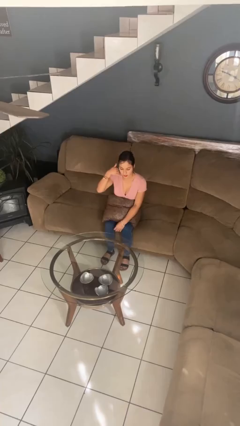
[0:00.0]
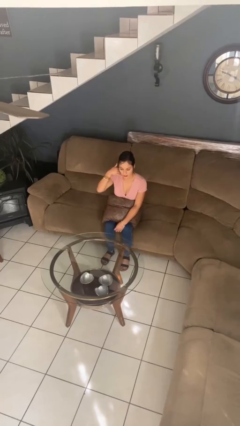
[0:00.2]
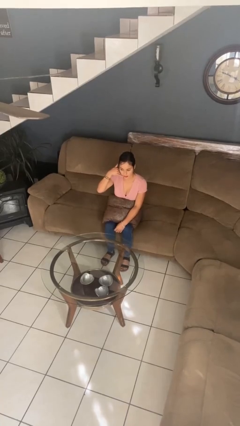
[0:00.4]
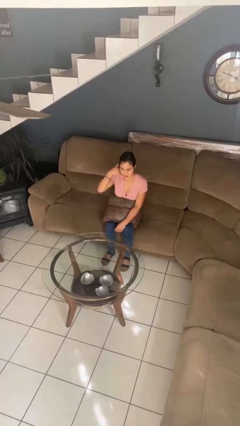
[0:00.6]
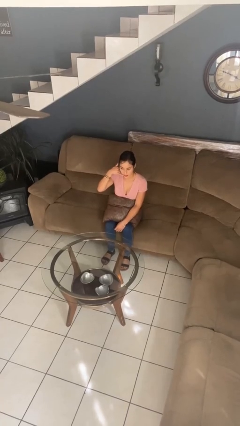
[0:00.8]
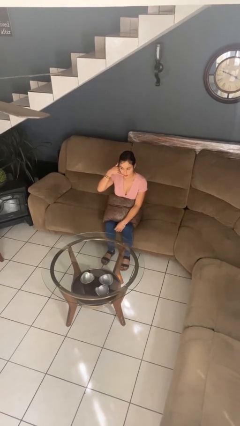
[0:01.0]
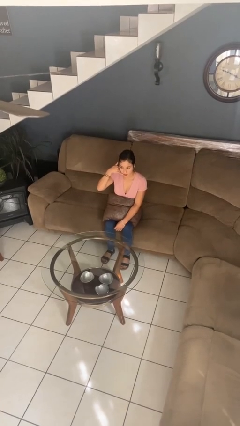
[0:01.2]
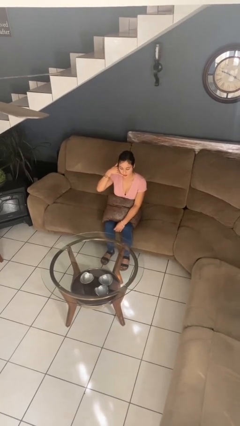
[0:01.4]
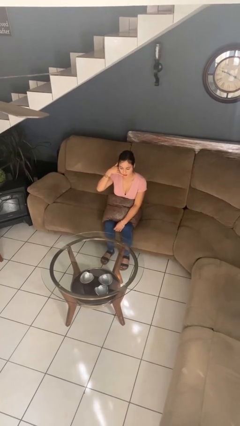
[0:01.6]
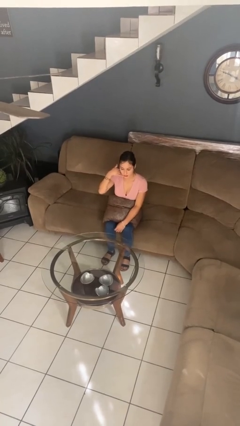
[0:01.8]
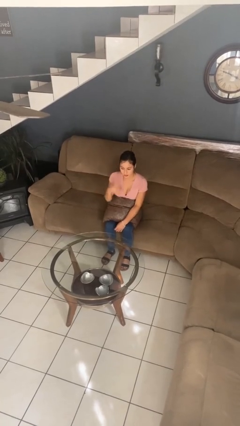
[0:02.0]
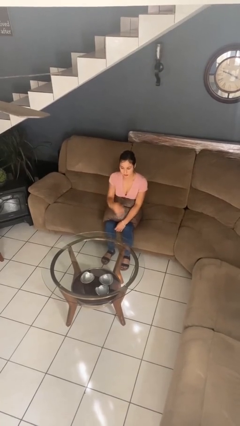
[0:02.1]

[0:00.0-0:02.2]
person gestures call me

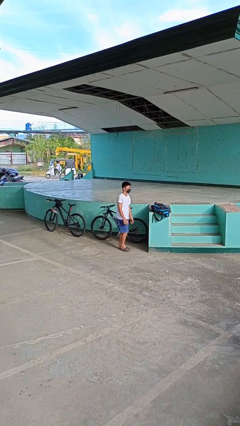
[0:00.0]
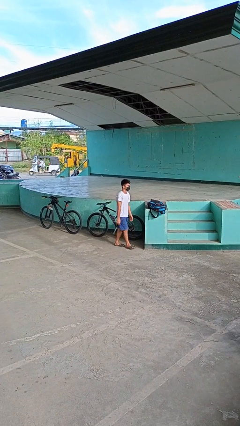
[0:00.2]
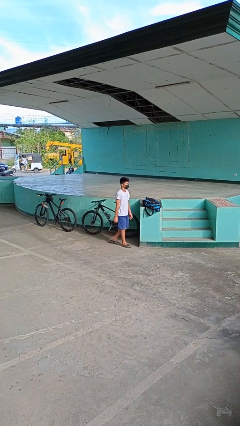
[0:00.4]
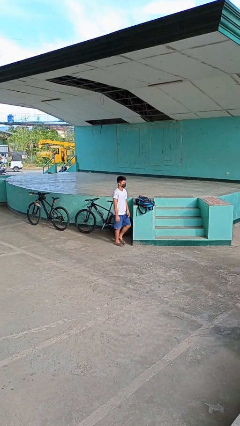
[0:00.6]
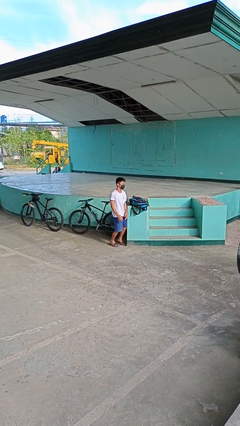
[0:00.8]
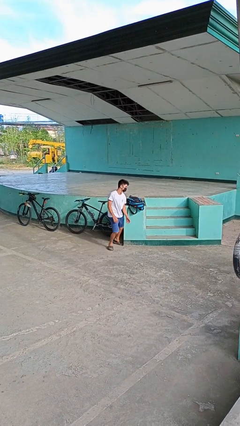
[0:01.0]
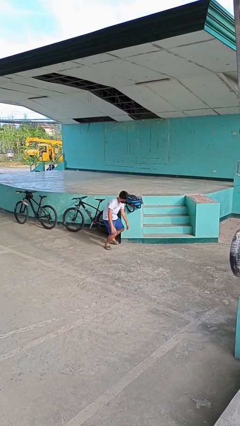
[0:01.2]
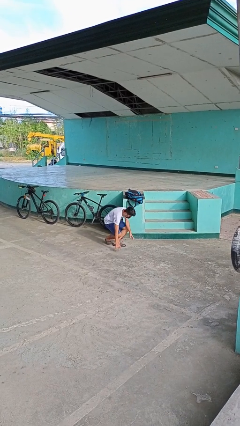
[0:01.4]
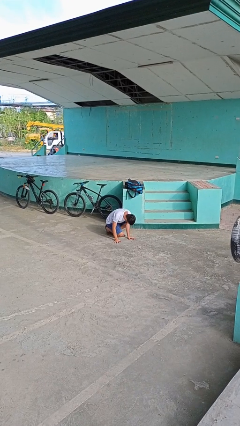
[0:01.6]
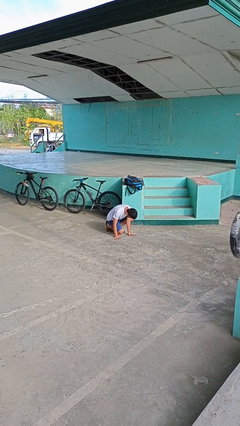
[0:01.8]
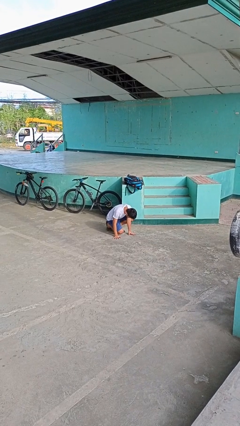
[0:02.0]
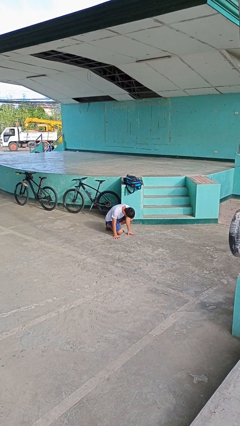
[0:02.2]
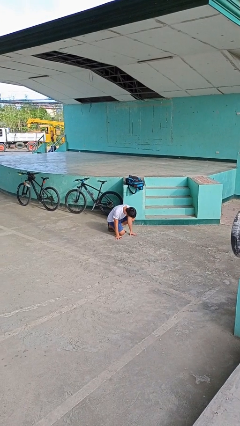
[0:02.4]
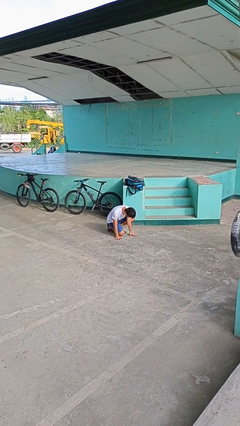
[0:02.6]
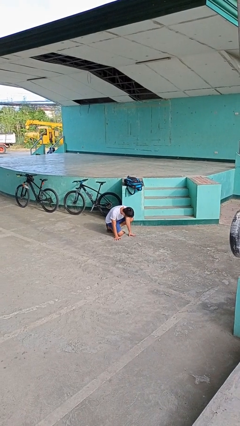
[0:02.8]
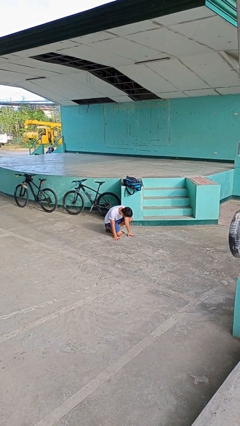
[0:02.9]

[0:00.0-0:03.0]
person trips on object on floor

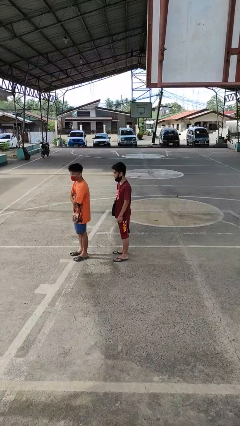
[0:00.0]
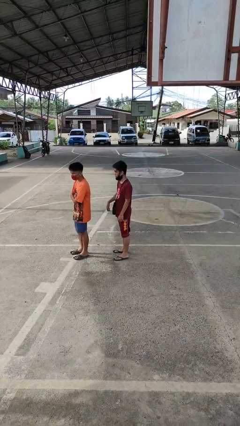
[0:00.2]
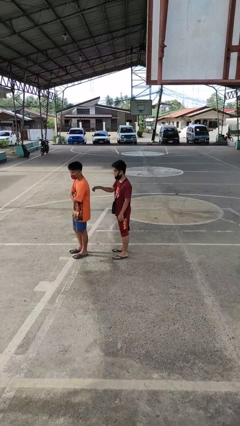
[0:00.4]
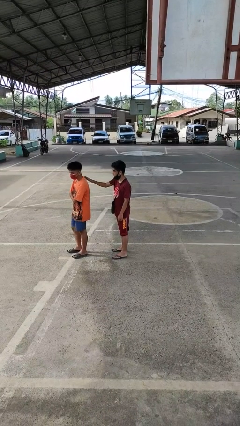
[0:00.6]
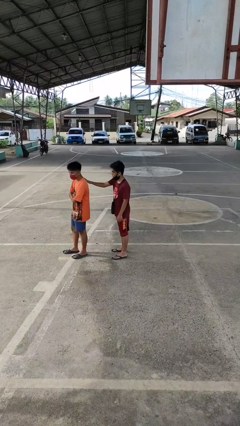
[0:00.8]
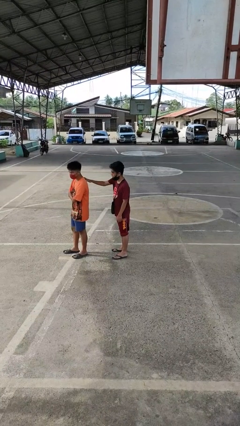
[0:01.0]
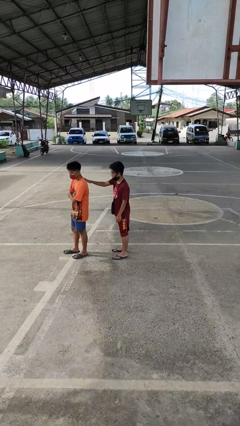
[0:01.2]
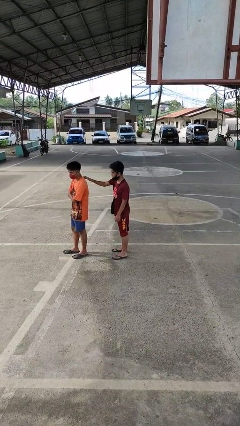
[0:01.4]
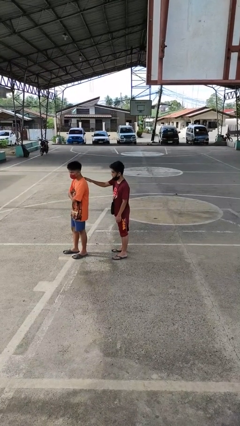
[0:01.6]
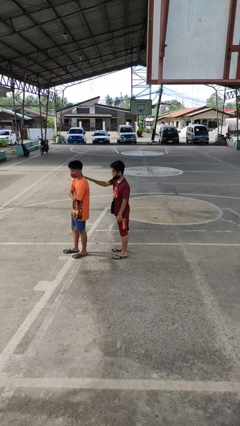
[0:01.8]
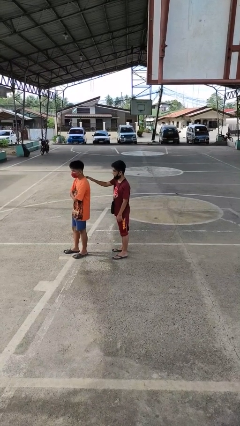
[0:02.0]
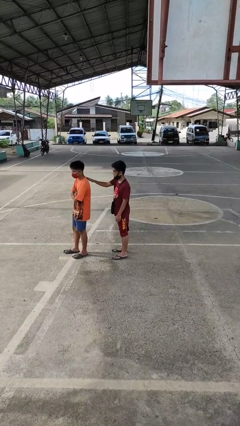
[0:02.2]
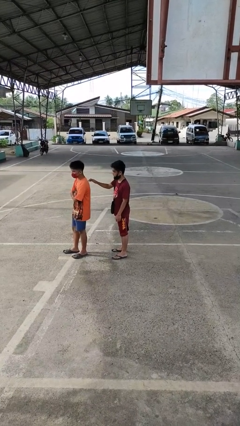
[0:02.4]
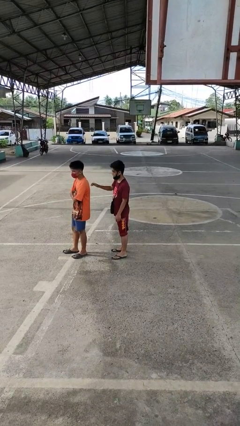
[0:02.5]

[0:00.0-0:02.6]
person touches back of person

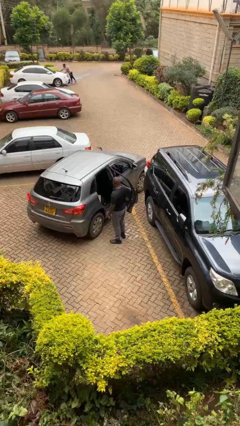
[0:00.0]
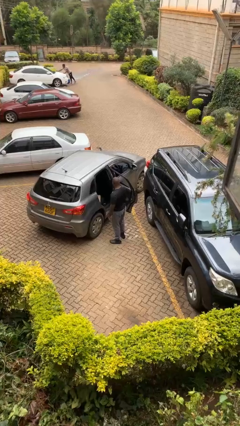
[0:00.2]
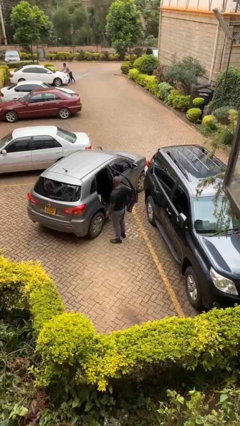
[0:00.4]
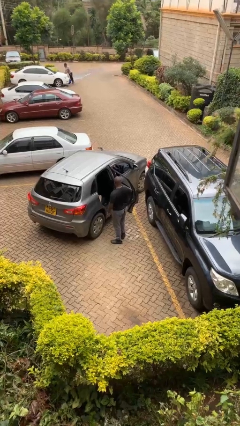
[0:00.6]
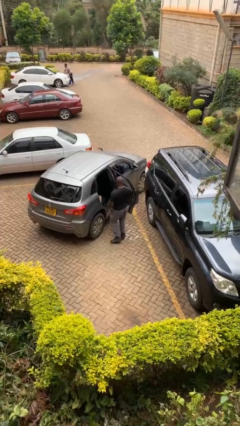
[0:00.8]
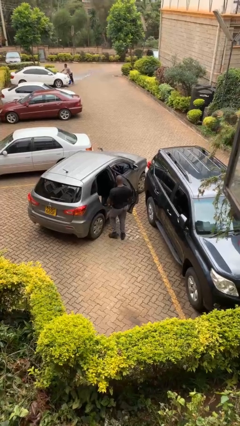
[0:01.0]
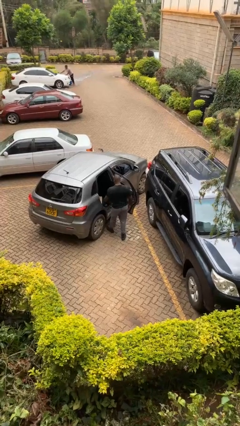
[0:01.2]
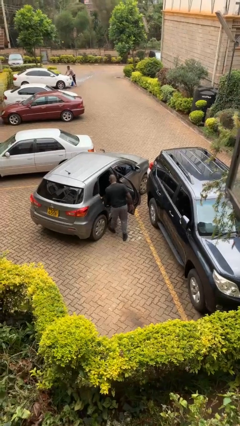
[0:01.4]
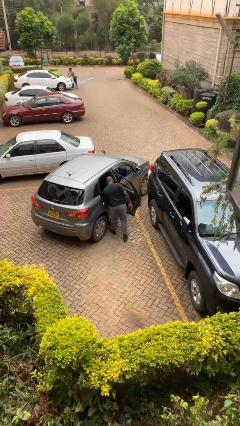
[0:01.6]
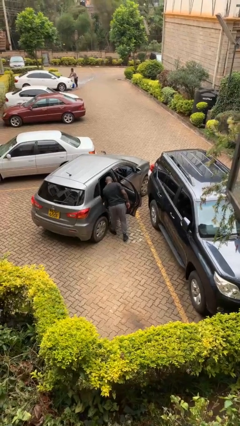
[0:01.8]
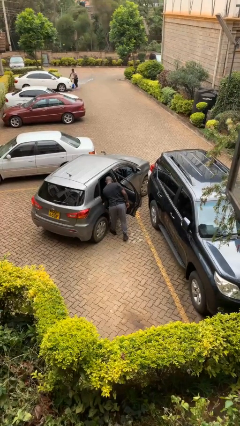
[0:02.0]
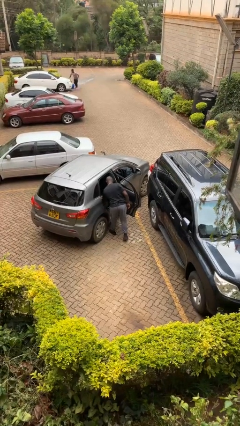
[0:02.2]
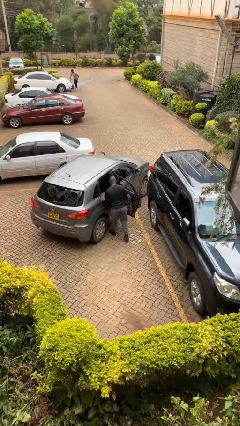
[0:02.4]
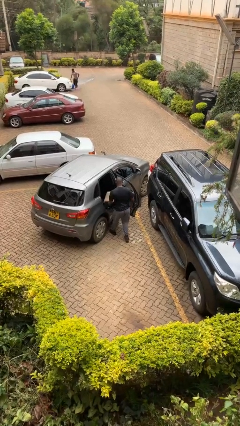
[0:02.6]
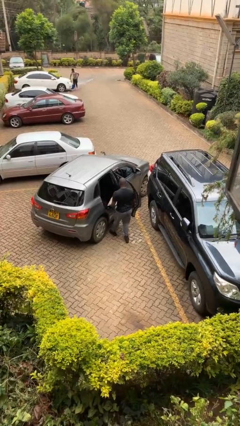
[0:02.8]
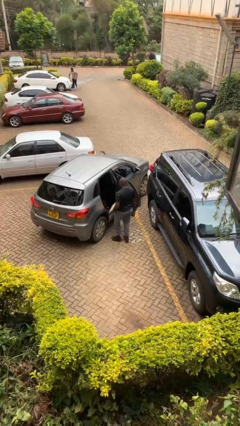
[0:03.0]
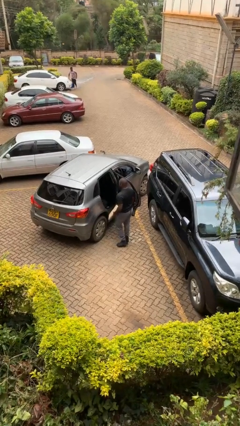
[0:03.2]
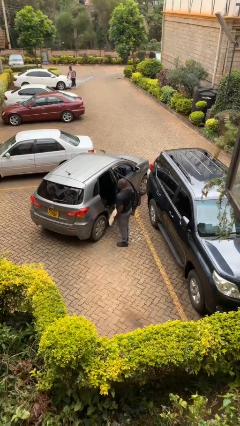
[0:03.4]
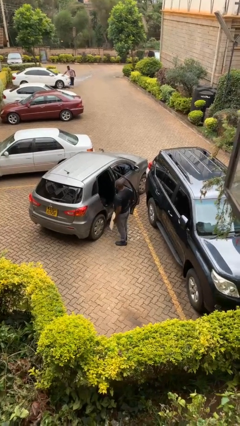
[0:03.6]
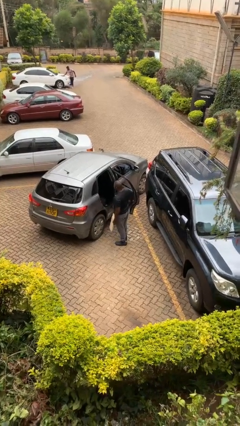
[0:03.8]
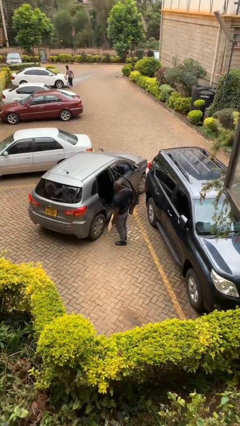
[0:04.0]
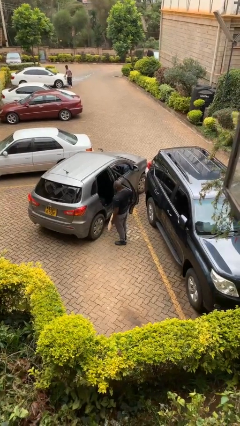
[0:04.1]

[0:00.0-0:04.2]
person unloads car

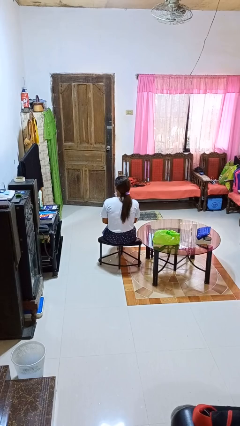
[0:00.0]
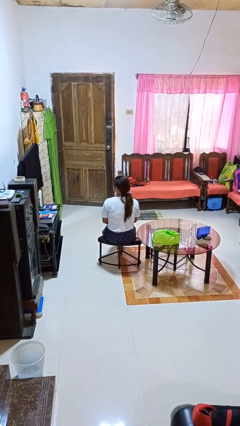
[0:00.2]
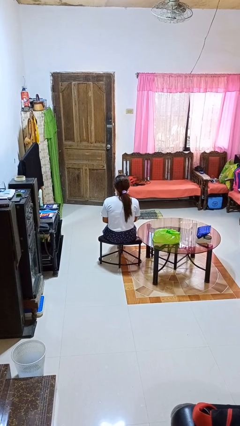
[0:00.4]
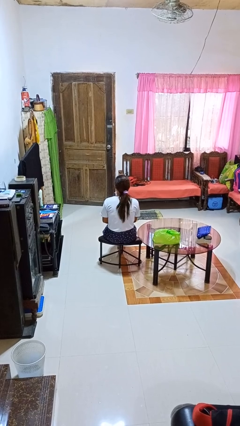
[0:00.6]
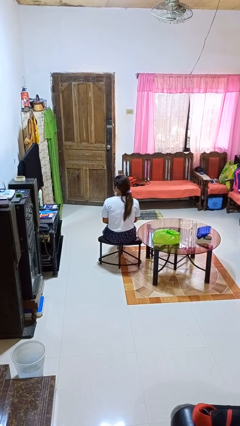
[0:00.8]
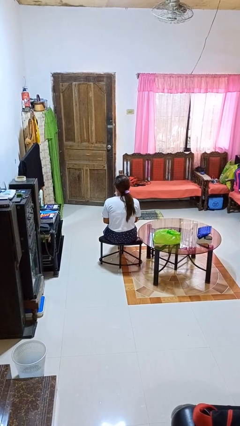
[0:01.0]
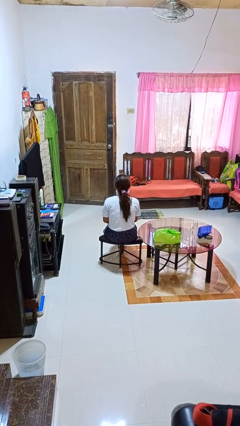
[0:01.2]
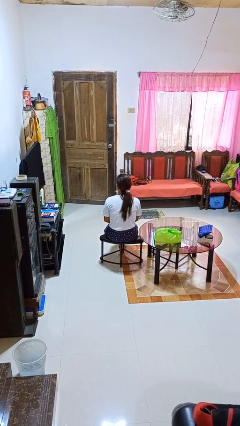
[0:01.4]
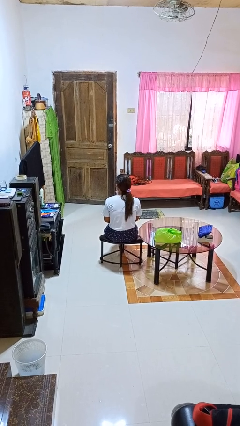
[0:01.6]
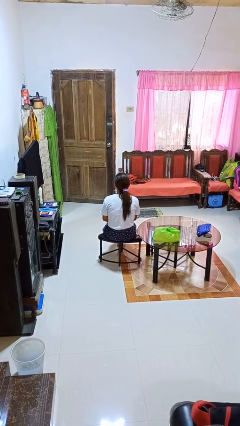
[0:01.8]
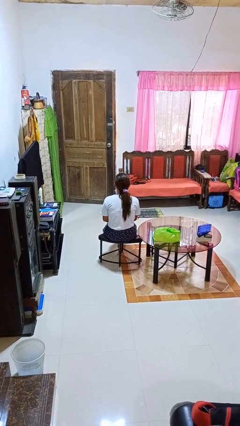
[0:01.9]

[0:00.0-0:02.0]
person shakes head

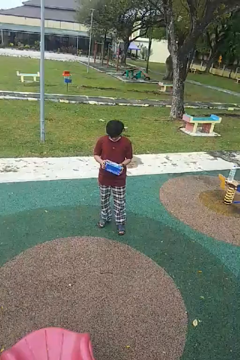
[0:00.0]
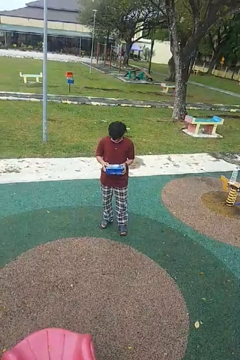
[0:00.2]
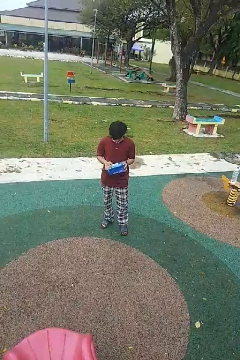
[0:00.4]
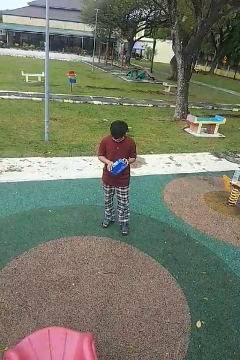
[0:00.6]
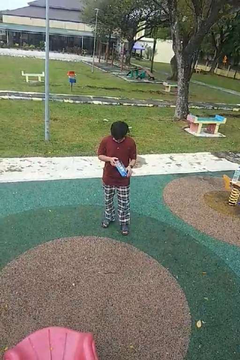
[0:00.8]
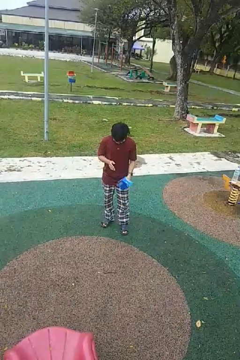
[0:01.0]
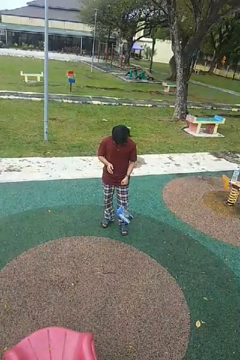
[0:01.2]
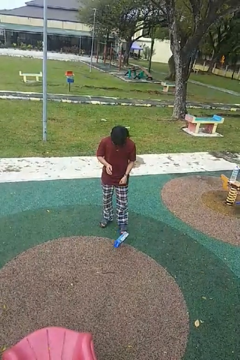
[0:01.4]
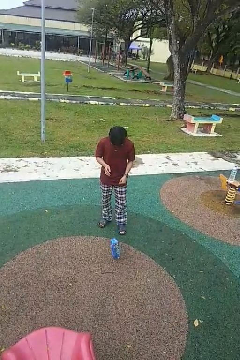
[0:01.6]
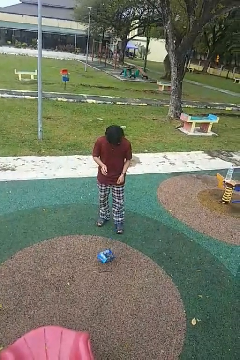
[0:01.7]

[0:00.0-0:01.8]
person drops object

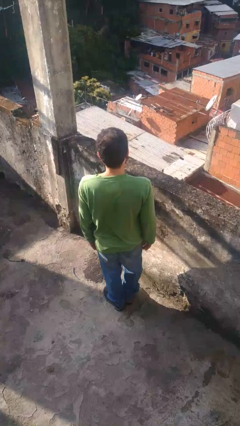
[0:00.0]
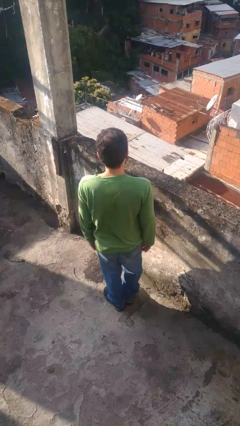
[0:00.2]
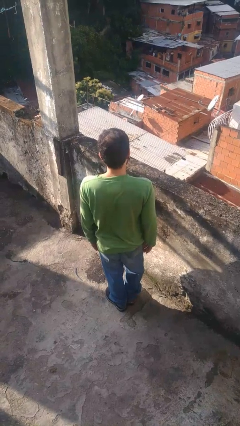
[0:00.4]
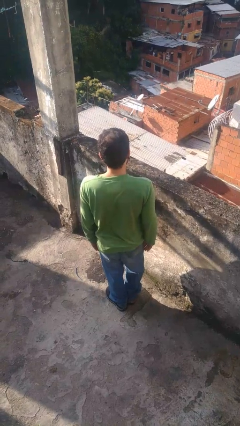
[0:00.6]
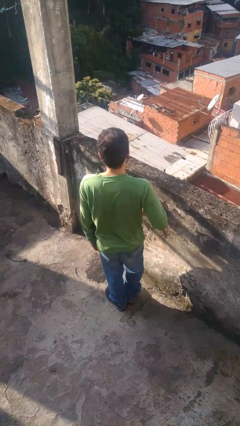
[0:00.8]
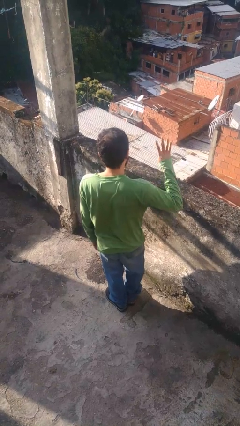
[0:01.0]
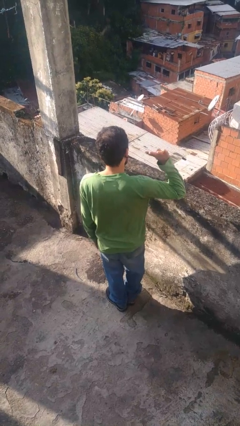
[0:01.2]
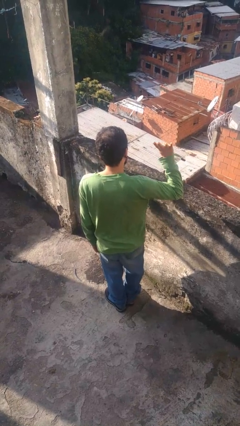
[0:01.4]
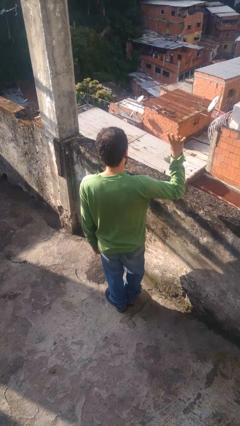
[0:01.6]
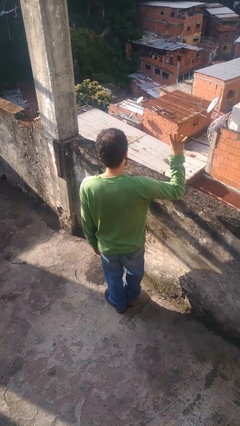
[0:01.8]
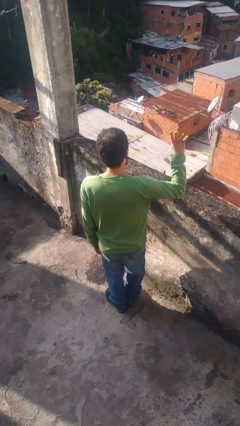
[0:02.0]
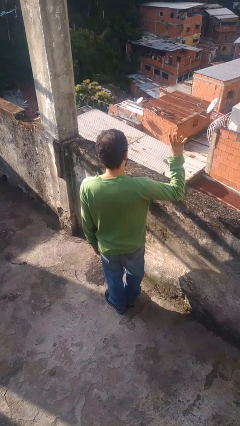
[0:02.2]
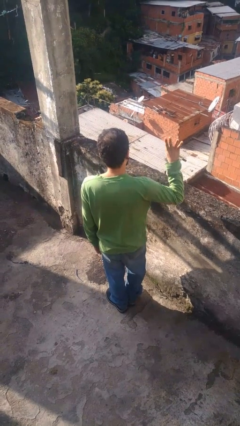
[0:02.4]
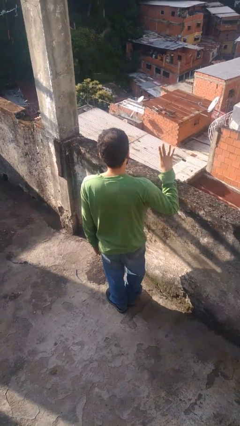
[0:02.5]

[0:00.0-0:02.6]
person gestures number four
